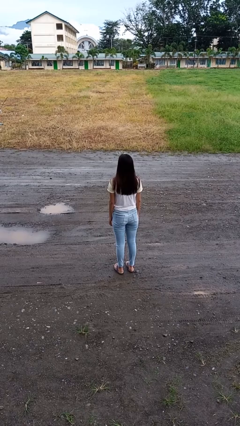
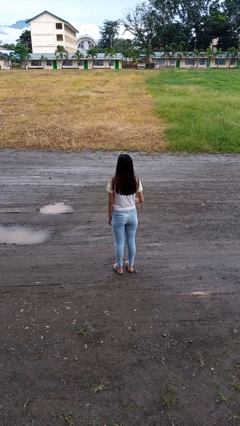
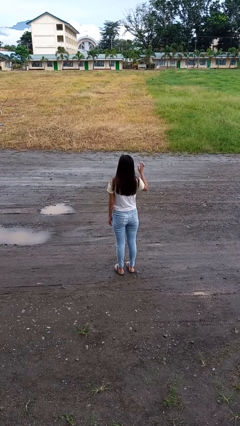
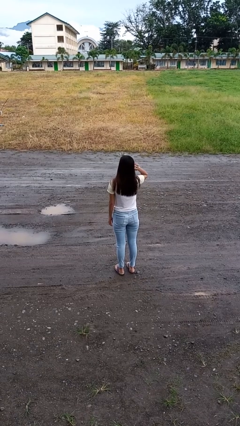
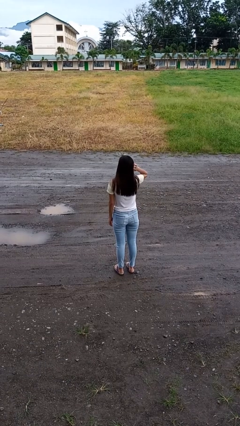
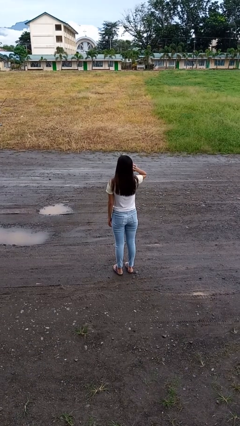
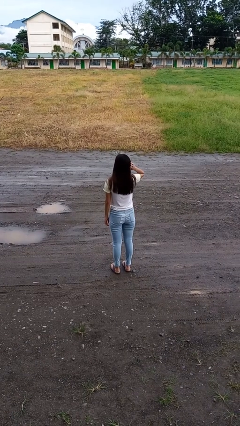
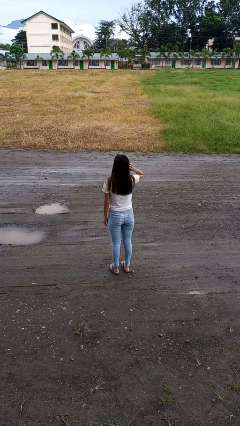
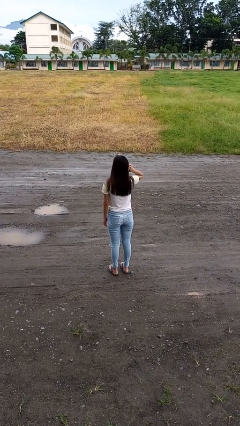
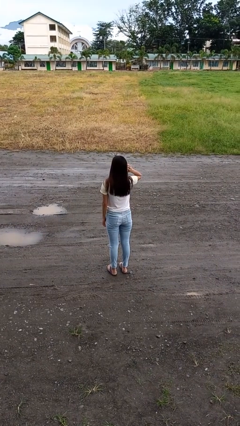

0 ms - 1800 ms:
person scratches face

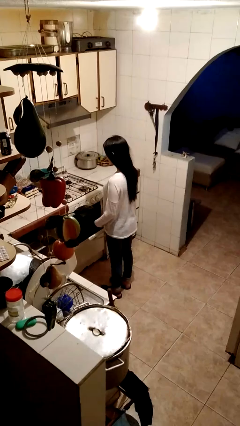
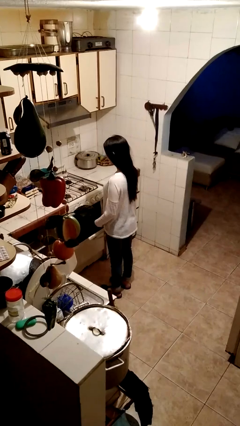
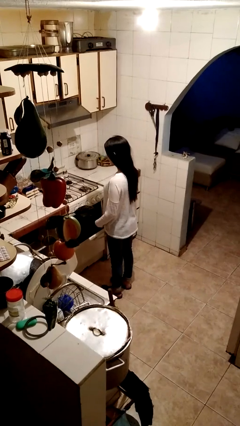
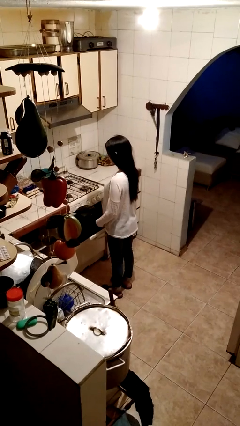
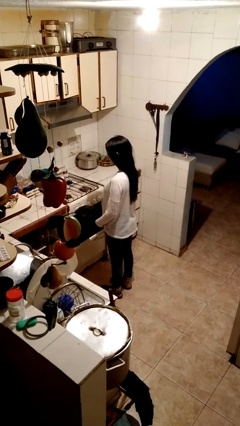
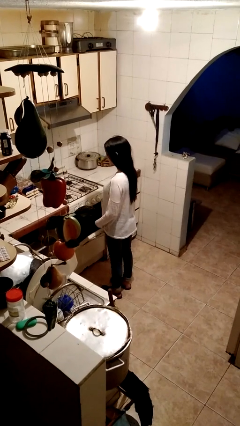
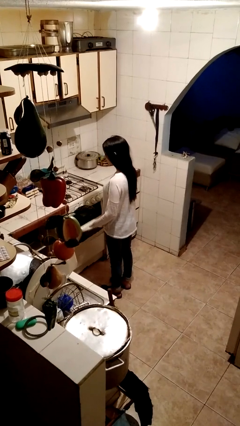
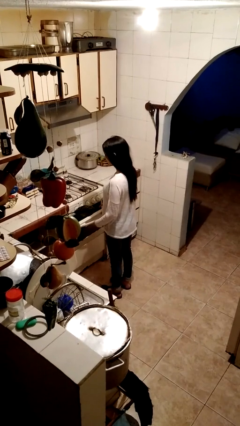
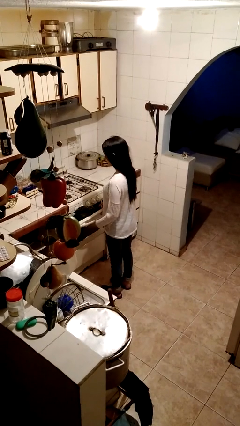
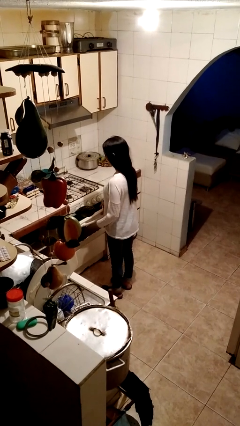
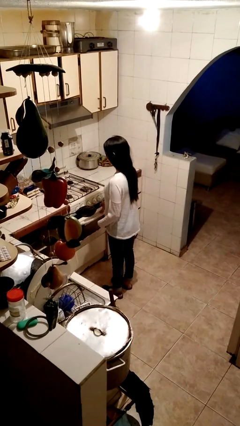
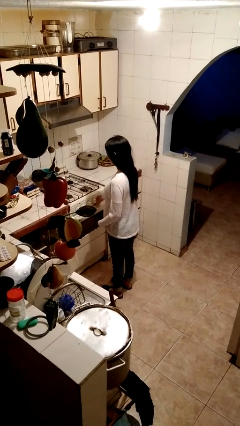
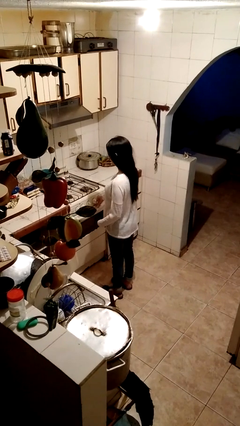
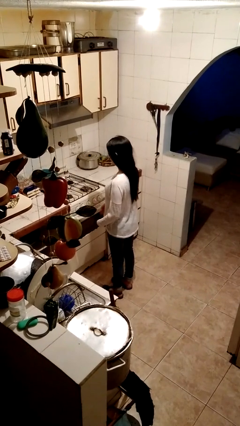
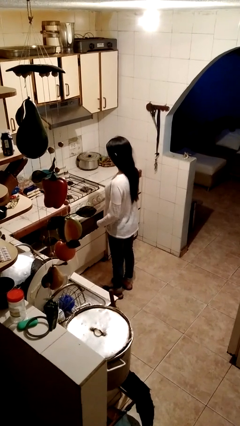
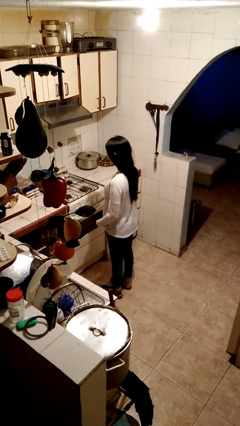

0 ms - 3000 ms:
person closes oven door

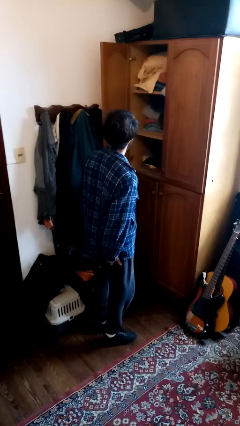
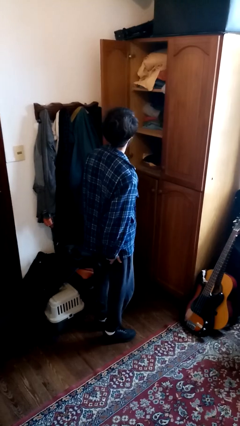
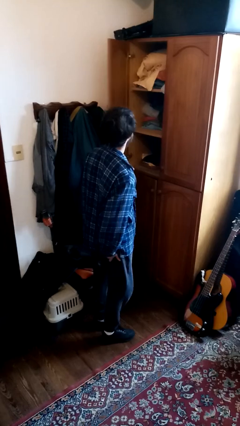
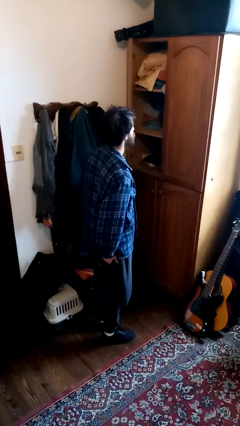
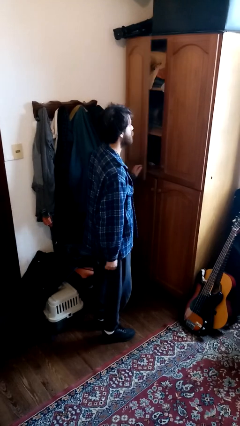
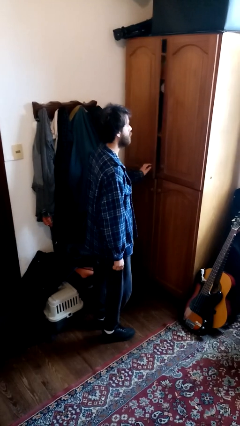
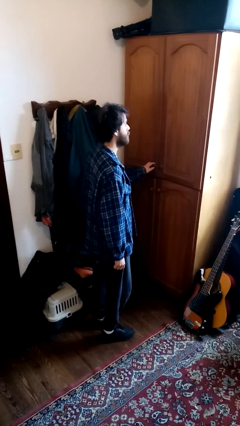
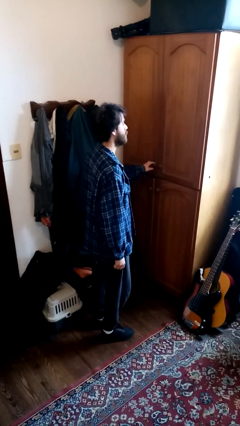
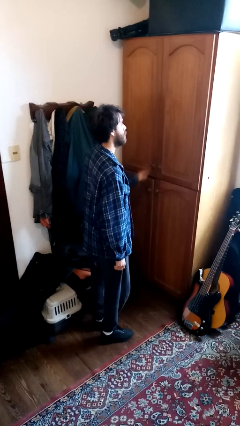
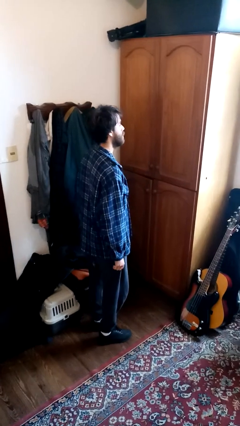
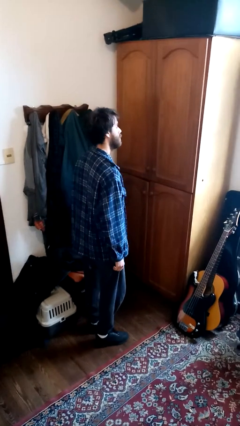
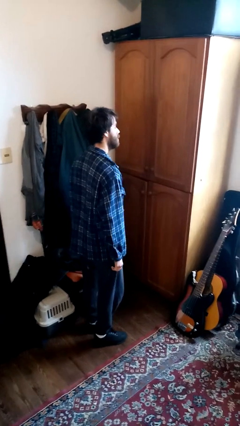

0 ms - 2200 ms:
person closes dresser drawer

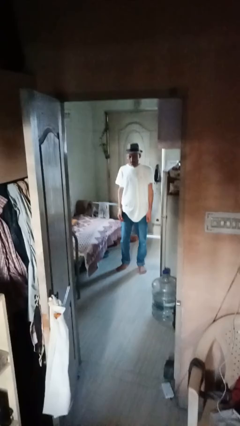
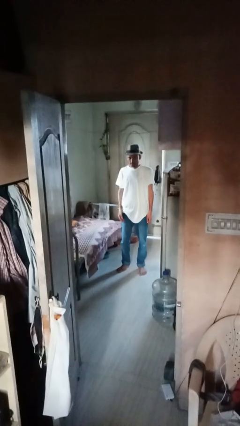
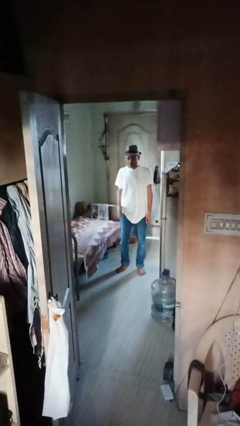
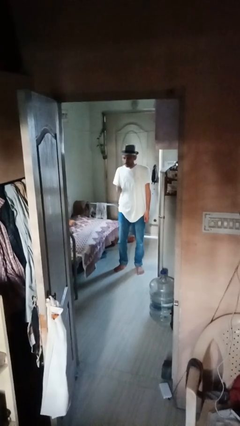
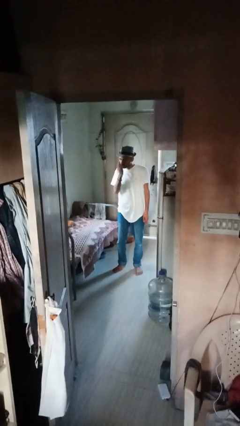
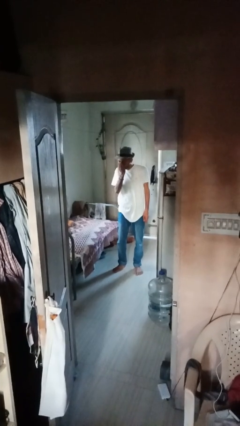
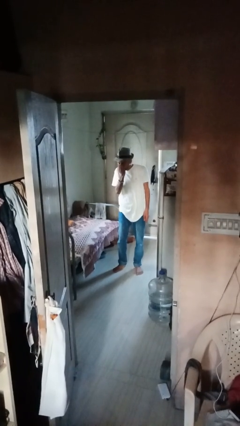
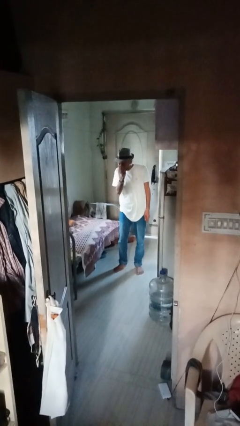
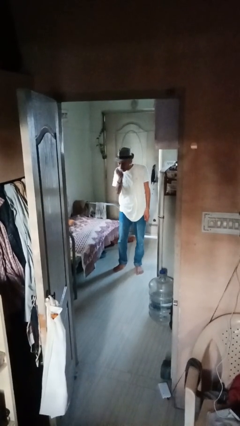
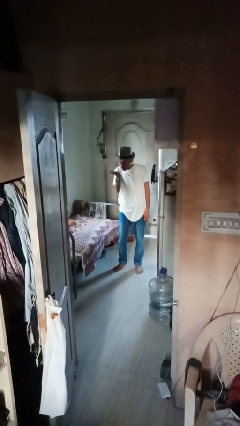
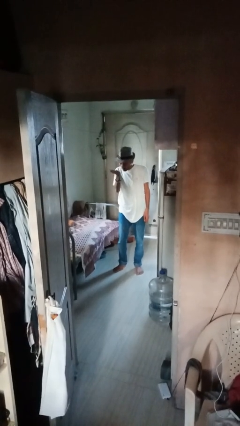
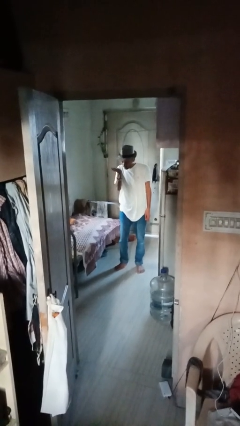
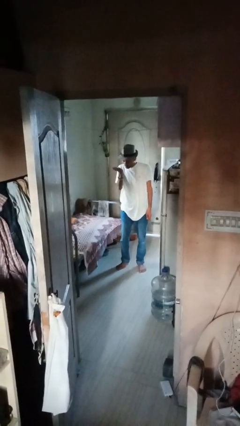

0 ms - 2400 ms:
person gestures blow kiss

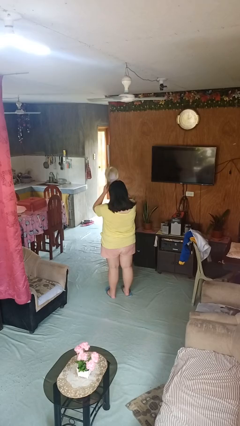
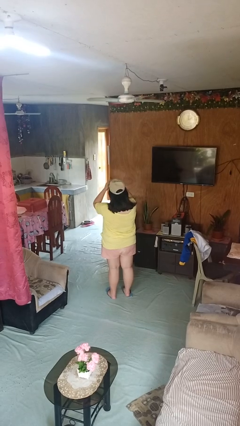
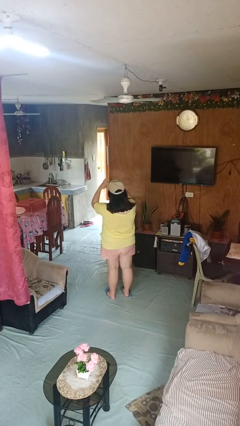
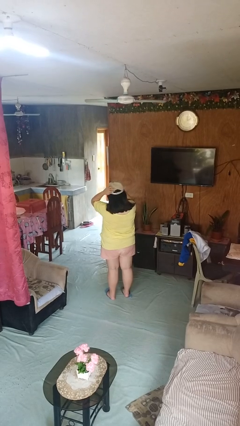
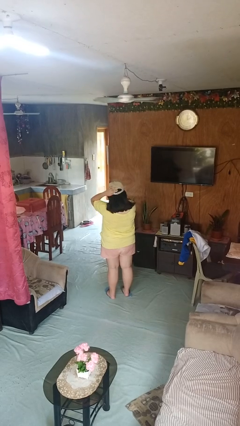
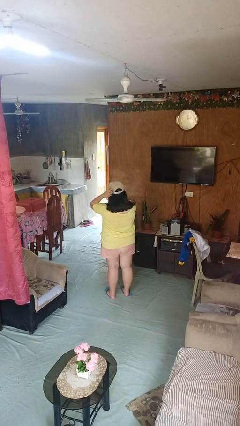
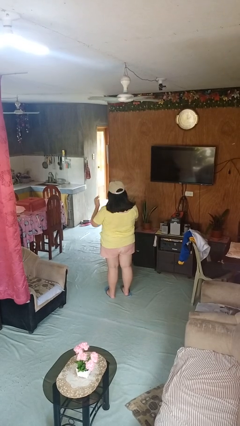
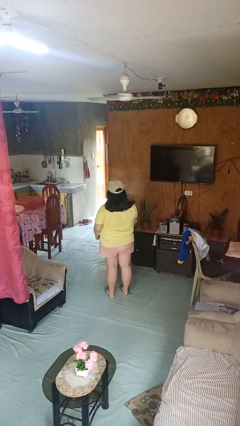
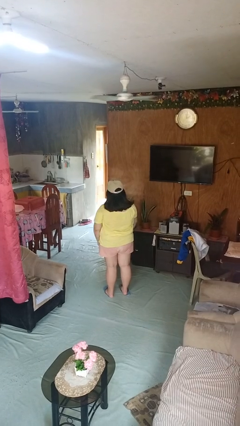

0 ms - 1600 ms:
person puts on hat

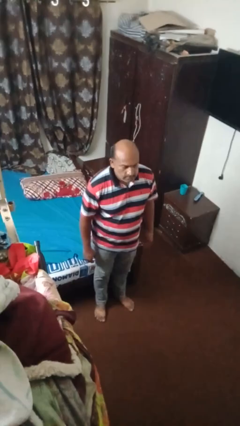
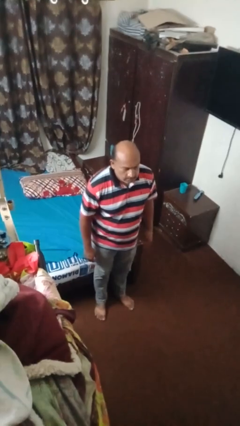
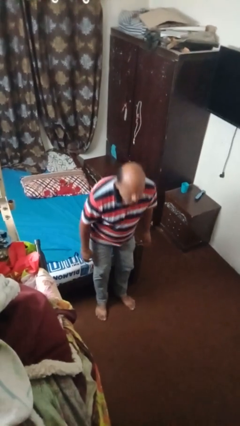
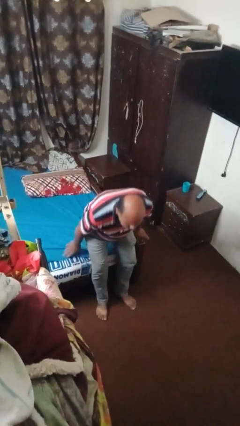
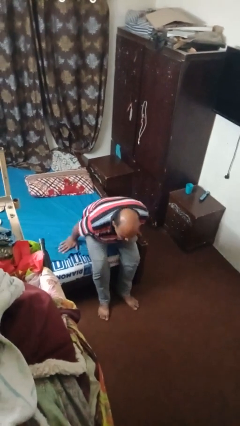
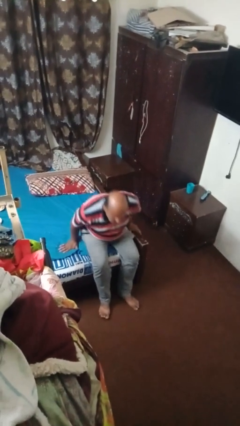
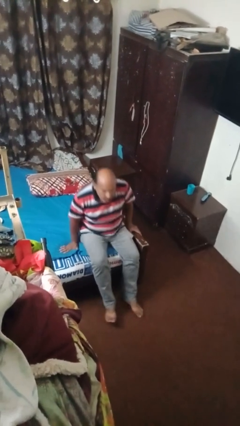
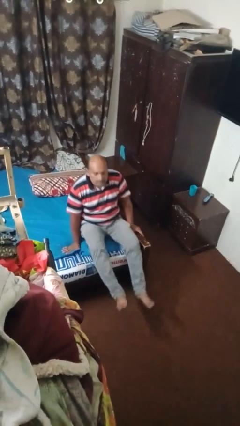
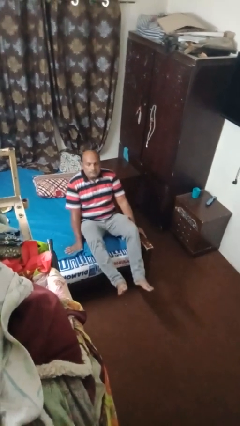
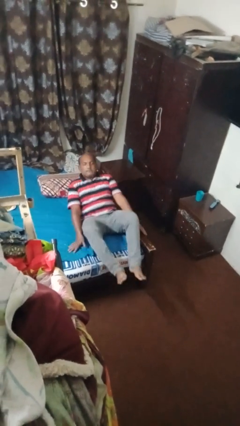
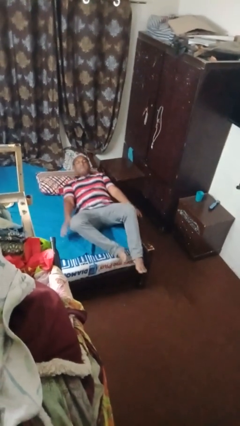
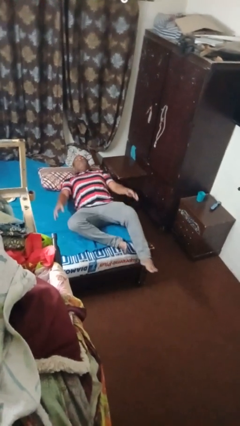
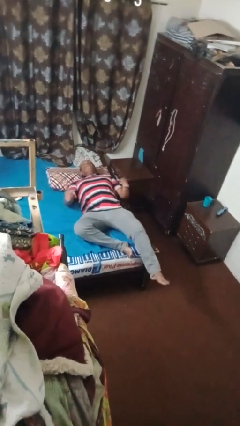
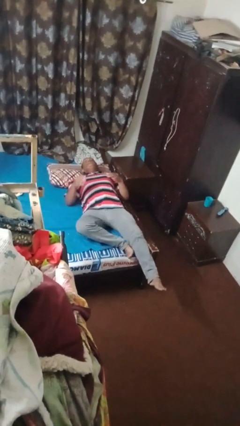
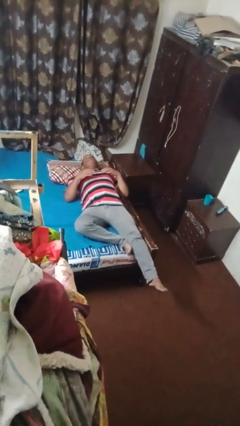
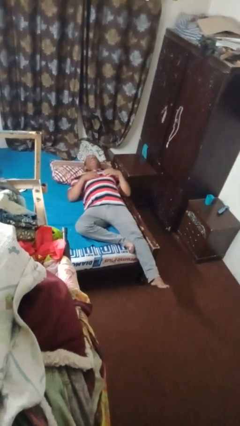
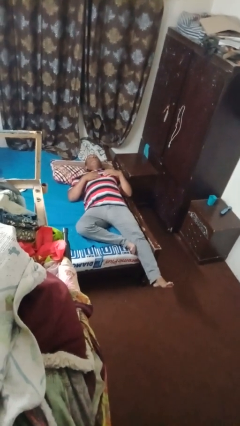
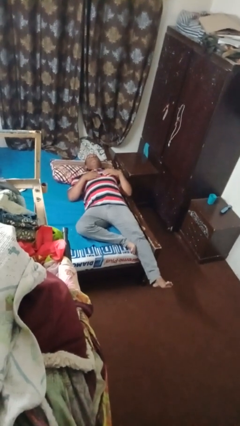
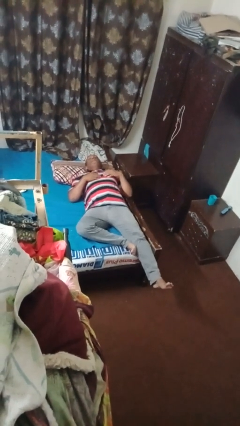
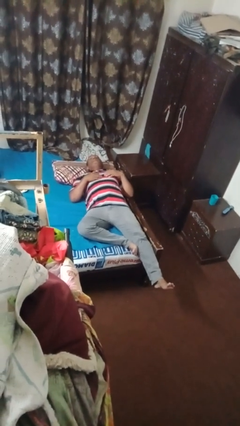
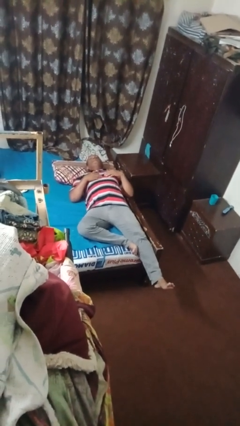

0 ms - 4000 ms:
person lies down on bed

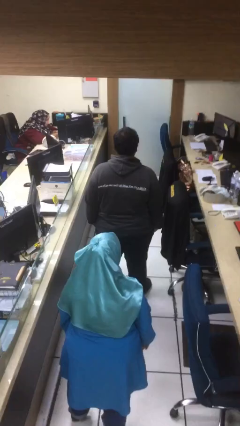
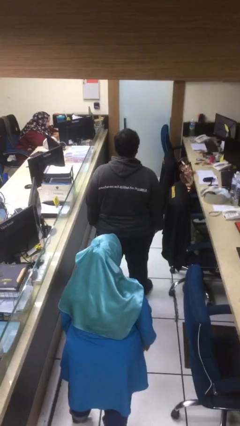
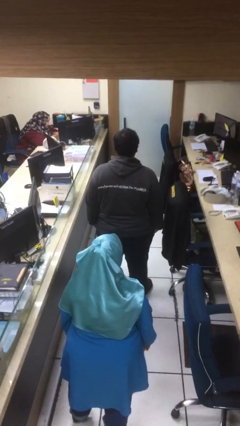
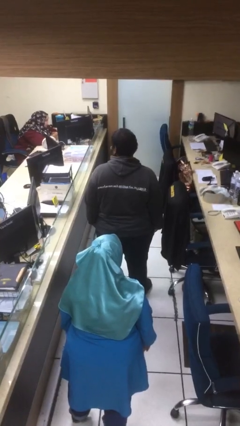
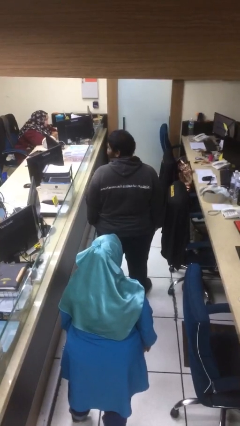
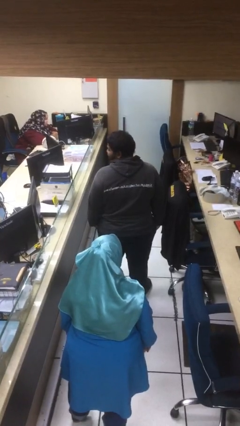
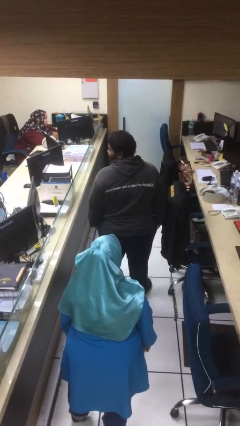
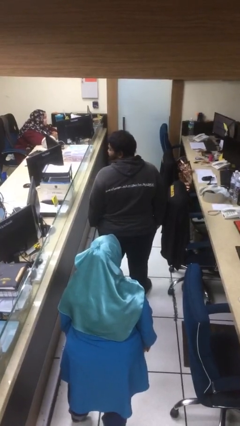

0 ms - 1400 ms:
person looks over shoulder

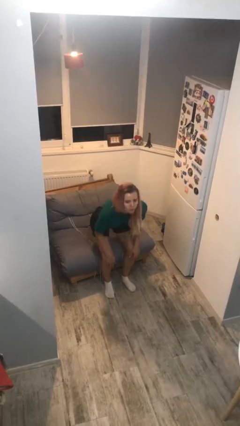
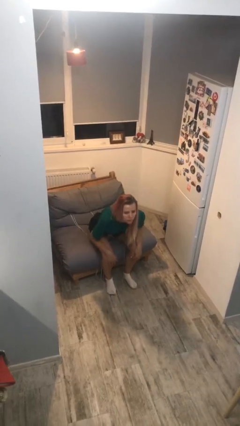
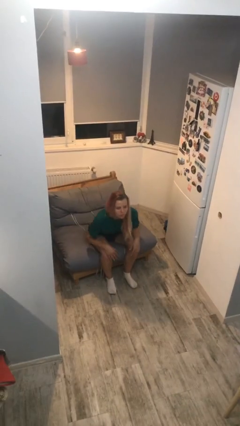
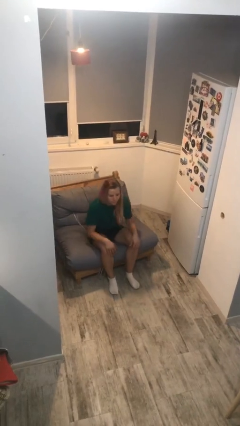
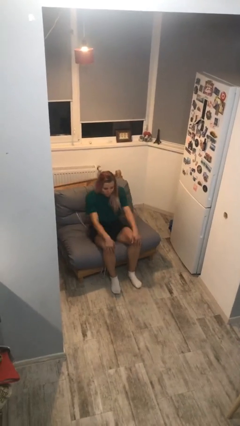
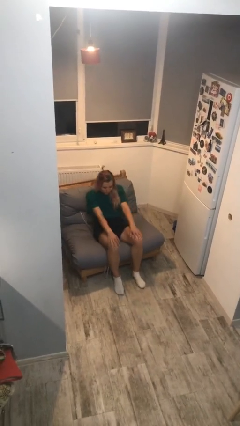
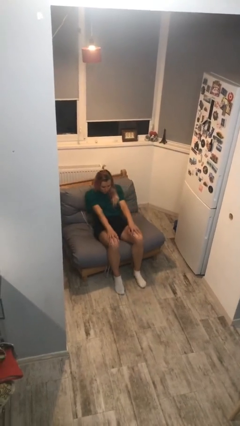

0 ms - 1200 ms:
person lies down on couch
